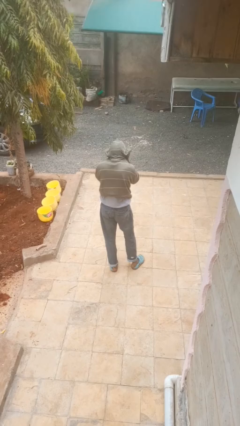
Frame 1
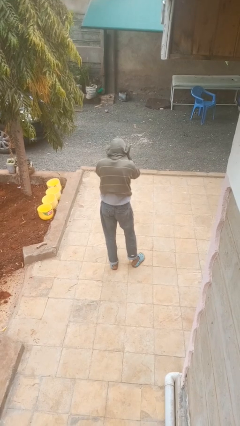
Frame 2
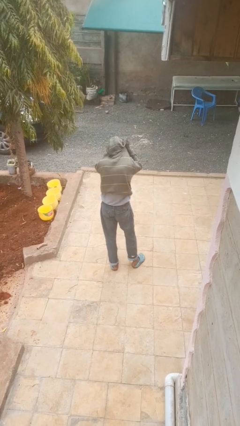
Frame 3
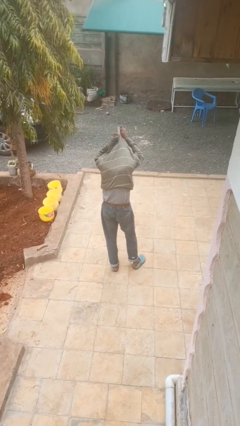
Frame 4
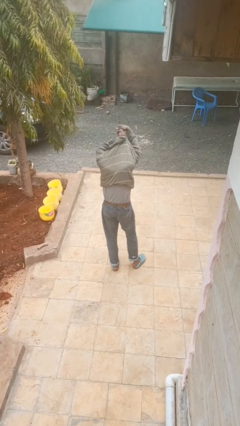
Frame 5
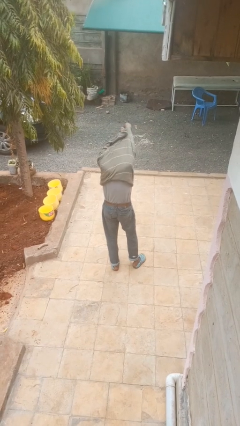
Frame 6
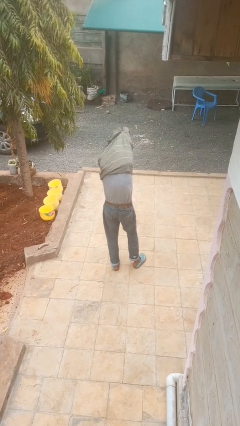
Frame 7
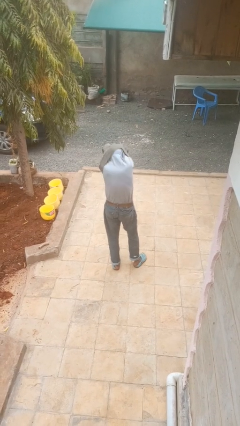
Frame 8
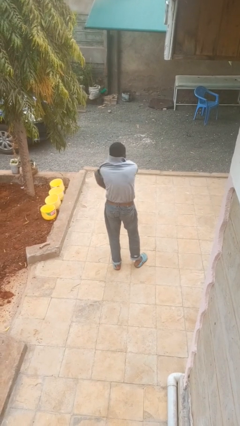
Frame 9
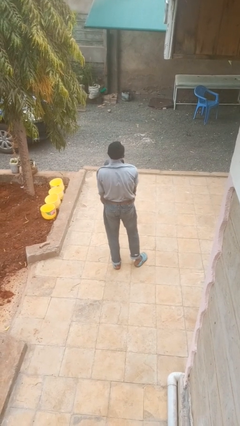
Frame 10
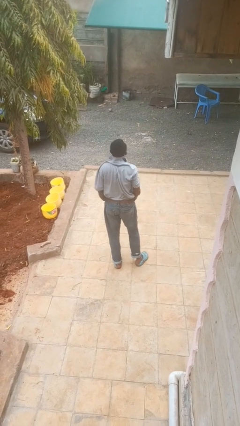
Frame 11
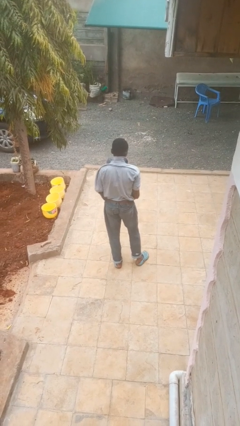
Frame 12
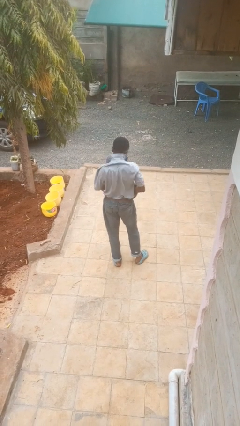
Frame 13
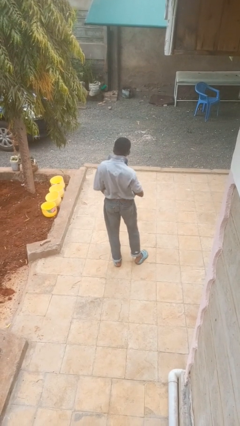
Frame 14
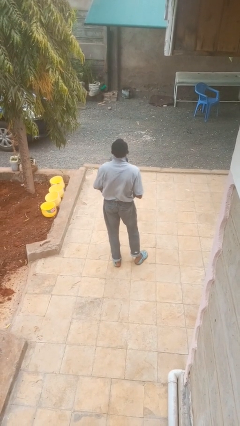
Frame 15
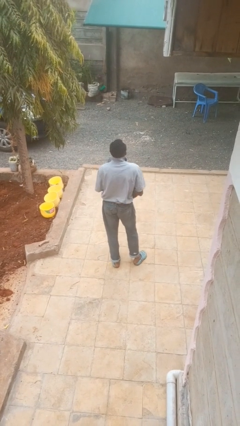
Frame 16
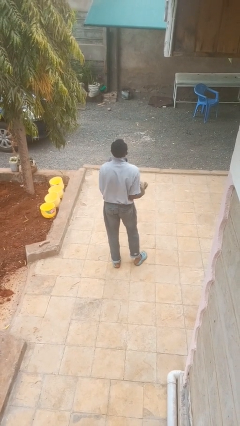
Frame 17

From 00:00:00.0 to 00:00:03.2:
person takes off hoodie

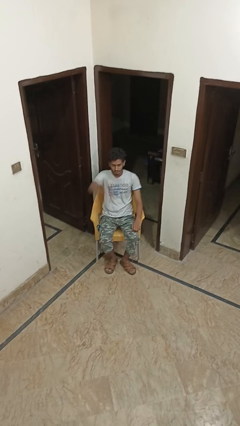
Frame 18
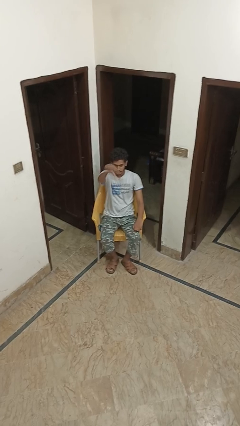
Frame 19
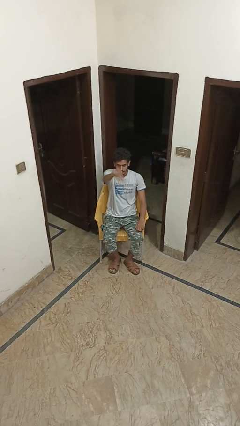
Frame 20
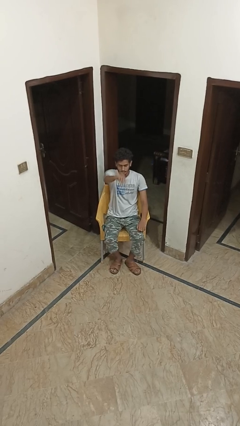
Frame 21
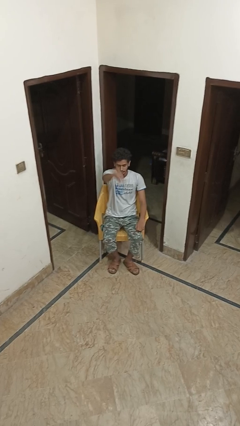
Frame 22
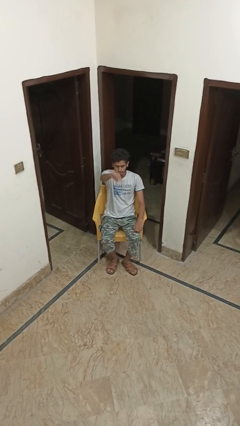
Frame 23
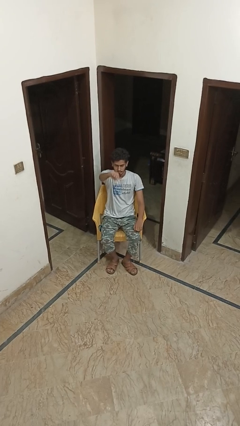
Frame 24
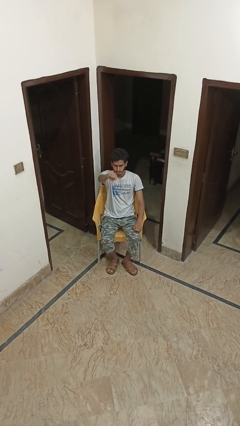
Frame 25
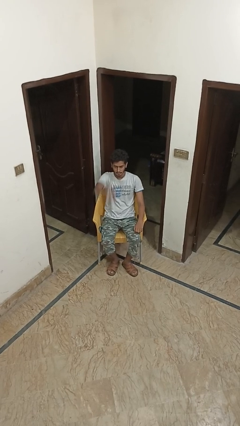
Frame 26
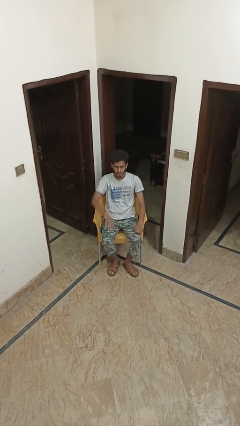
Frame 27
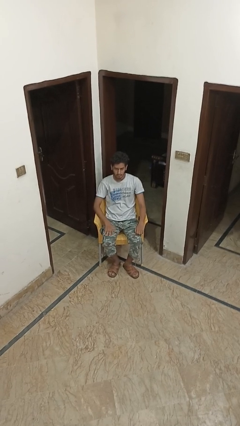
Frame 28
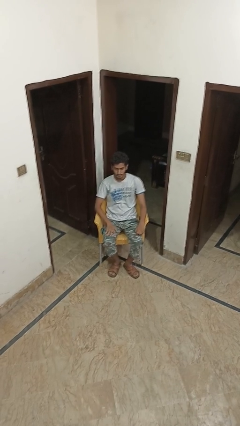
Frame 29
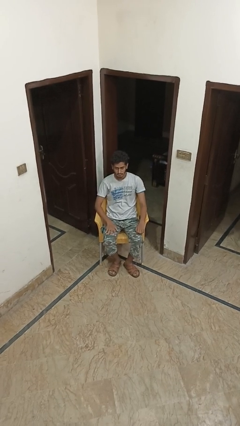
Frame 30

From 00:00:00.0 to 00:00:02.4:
person gestures thumbs down

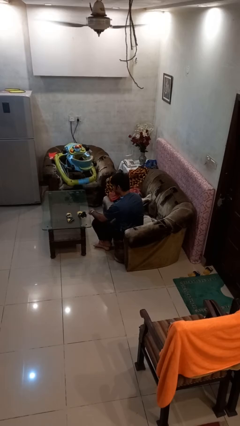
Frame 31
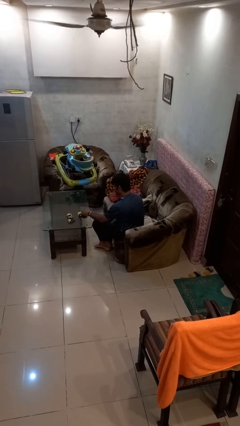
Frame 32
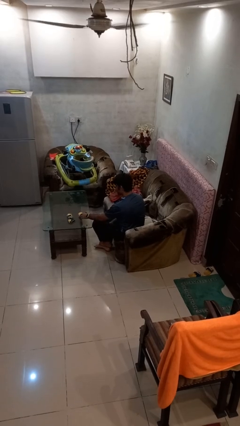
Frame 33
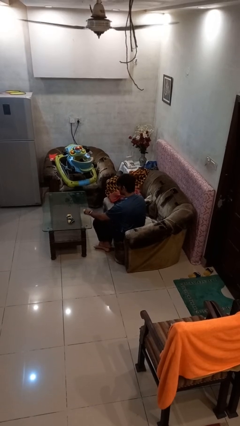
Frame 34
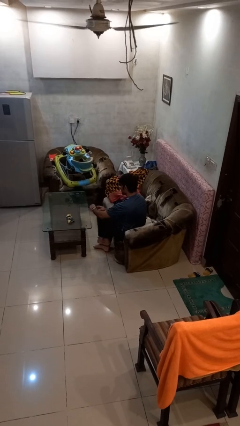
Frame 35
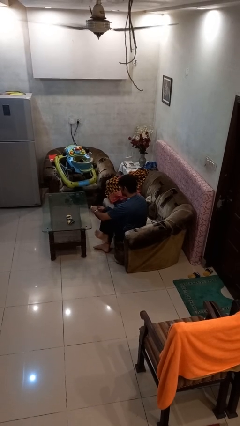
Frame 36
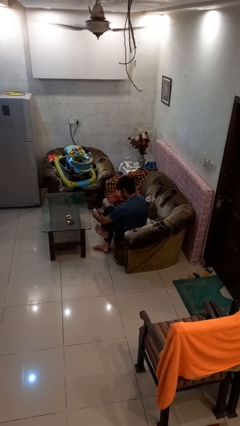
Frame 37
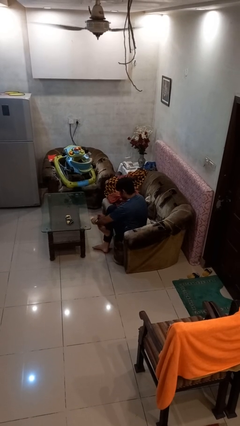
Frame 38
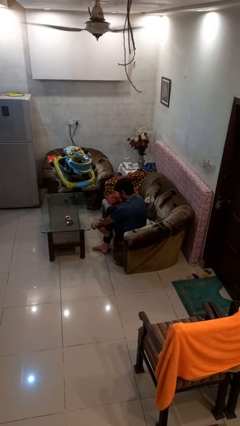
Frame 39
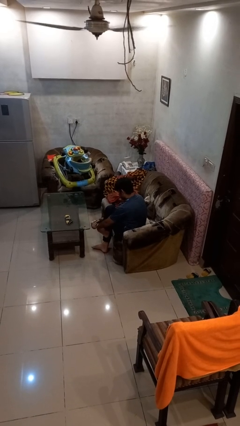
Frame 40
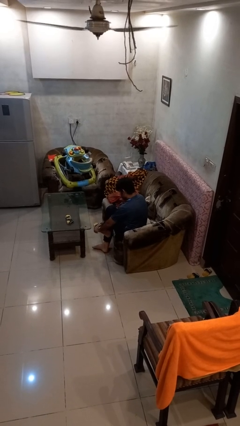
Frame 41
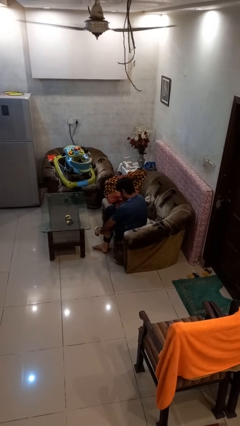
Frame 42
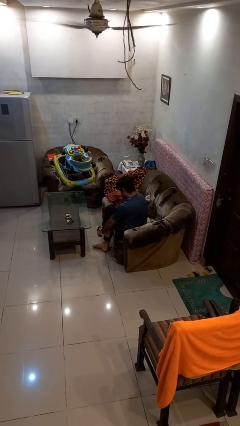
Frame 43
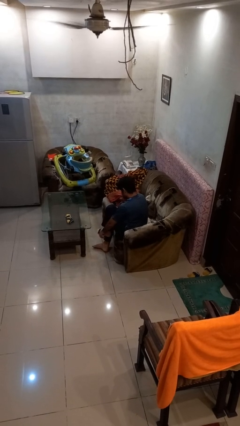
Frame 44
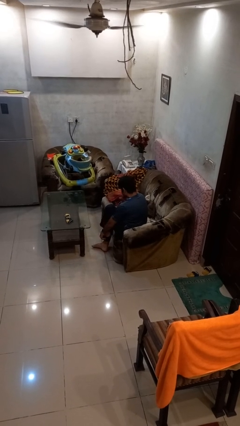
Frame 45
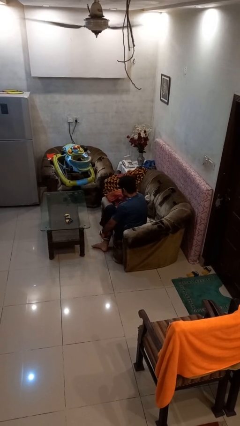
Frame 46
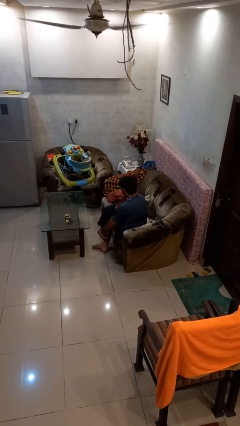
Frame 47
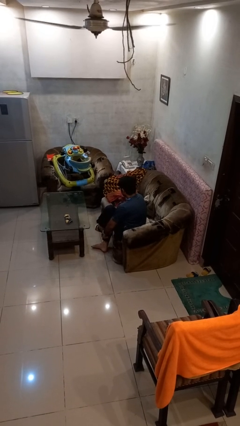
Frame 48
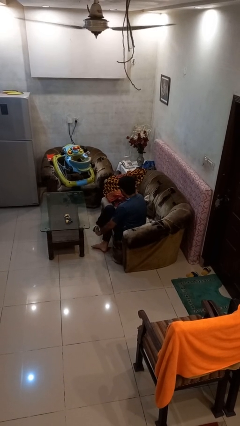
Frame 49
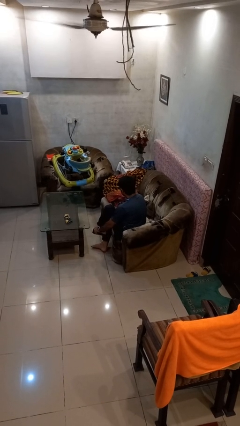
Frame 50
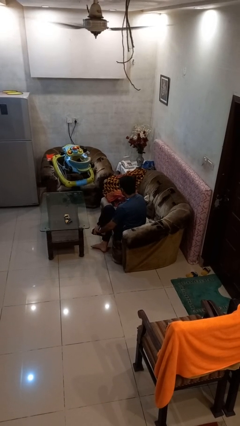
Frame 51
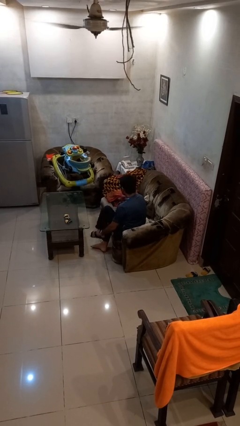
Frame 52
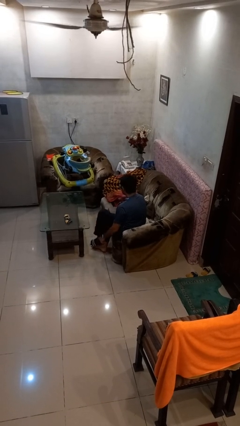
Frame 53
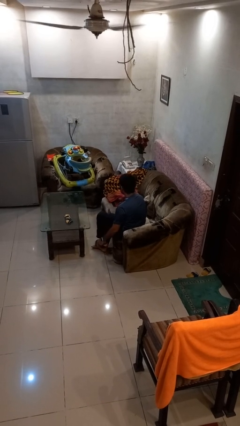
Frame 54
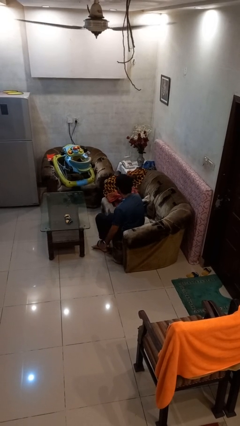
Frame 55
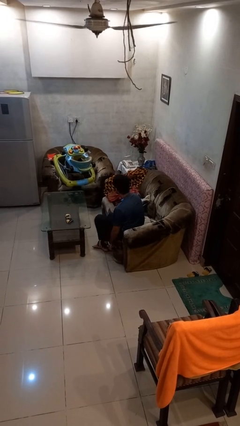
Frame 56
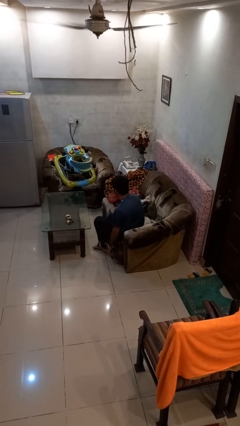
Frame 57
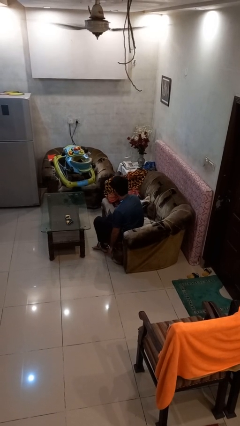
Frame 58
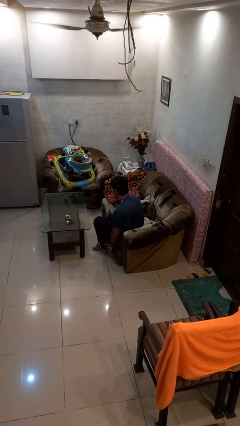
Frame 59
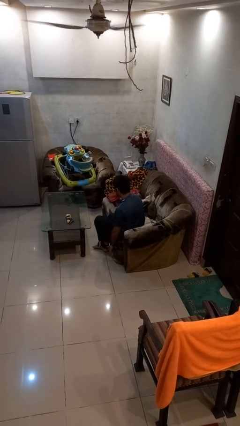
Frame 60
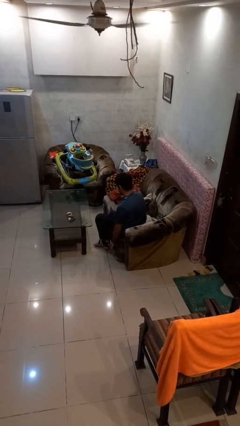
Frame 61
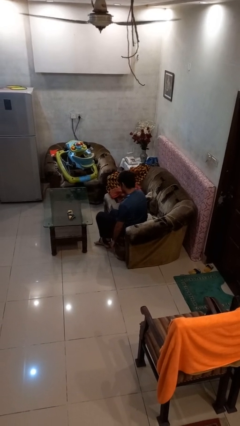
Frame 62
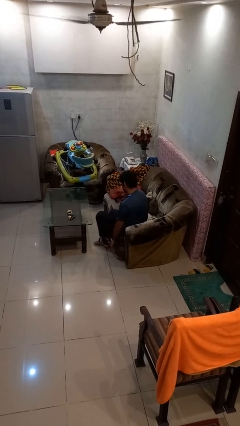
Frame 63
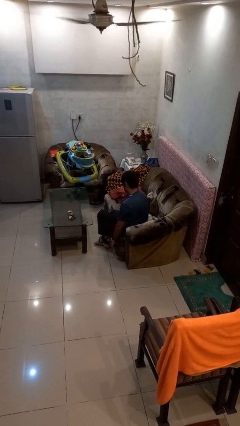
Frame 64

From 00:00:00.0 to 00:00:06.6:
person puts on socks

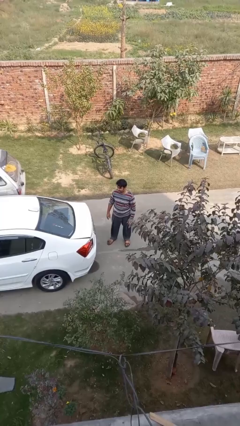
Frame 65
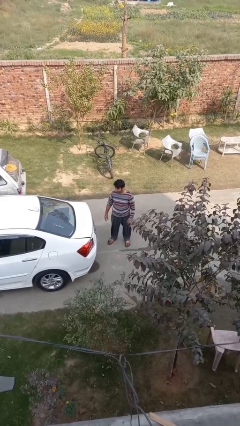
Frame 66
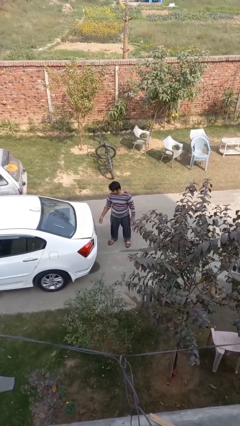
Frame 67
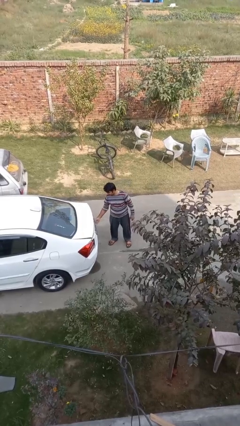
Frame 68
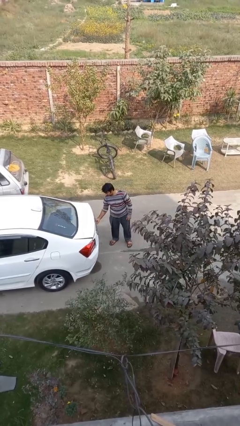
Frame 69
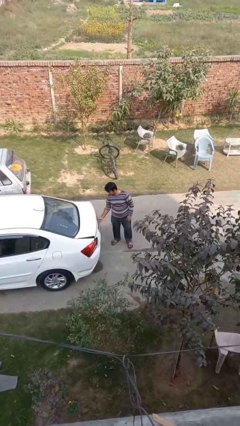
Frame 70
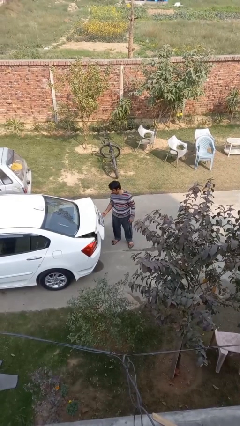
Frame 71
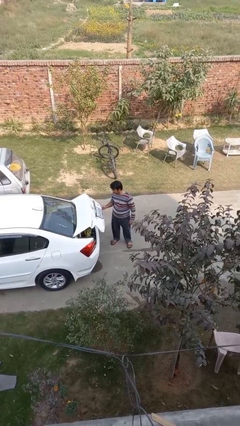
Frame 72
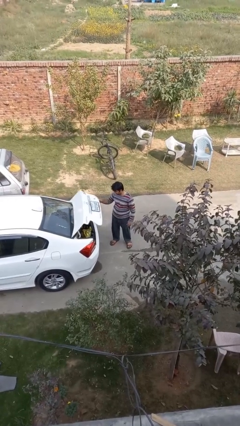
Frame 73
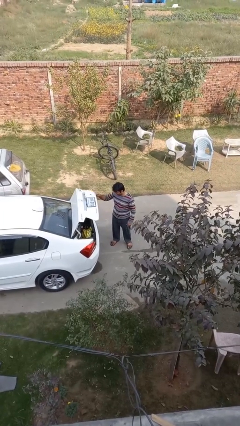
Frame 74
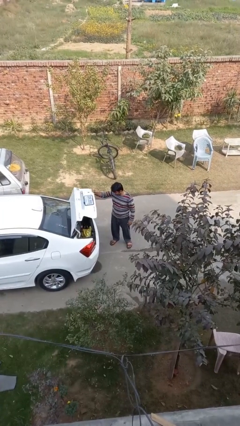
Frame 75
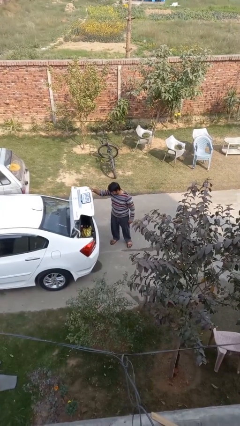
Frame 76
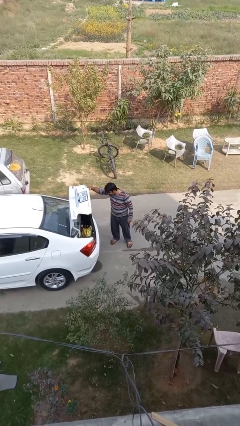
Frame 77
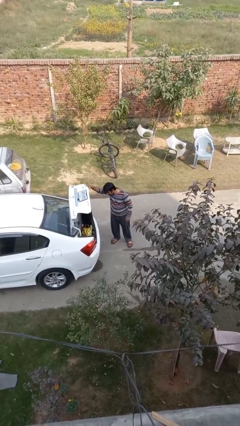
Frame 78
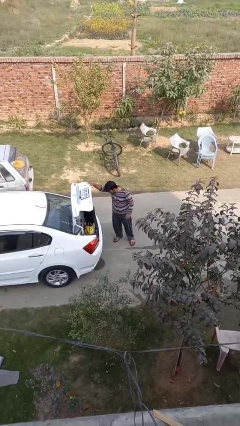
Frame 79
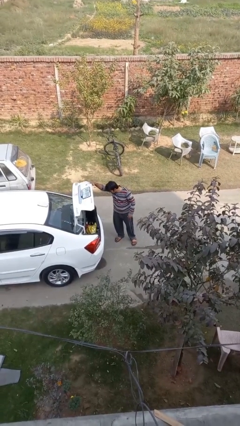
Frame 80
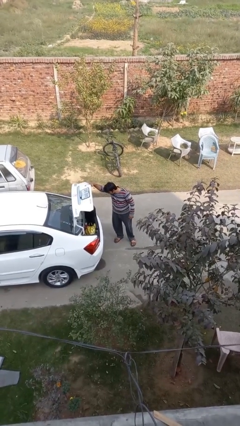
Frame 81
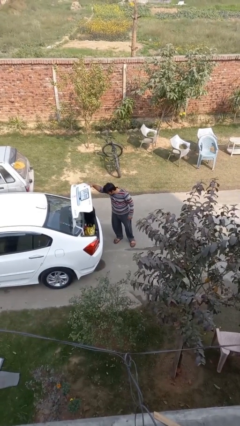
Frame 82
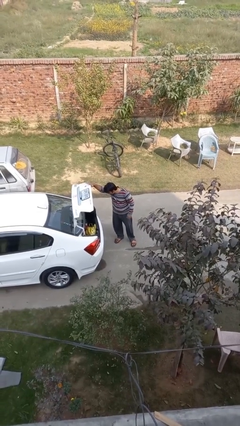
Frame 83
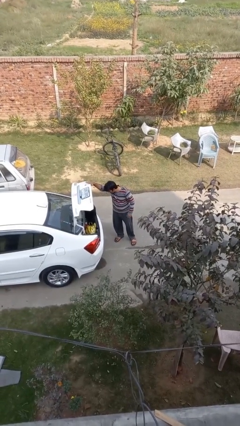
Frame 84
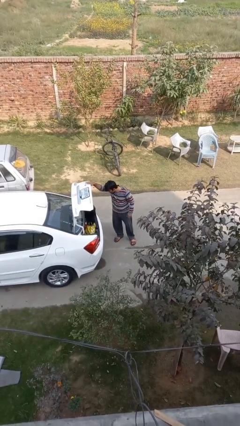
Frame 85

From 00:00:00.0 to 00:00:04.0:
person opens car trunk

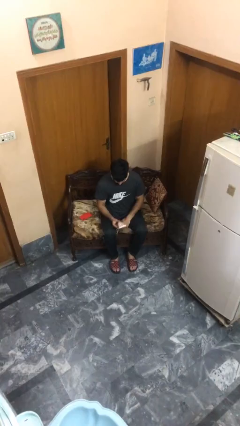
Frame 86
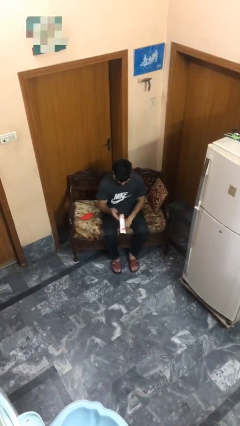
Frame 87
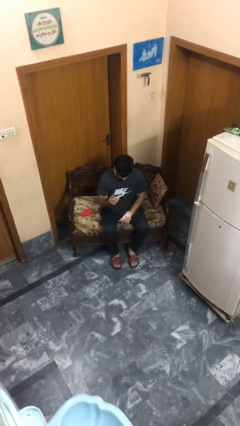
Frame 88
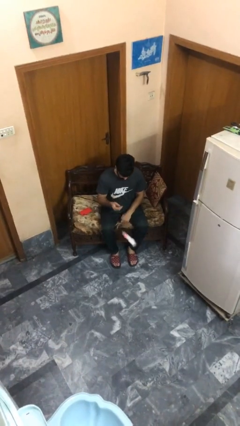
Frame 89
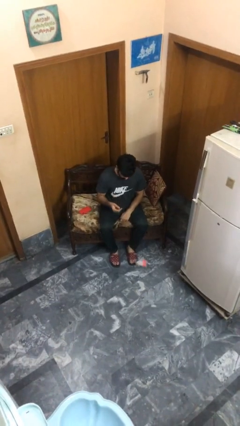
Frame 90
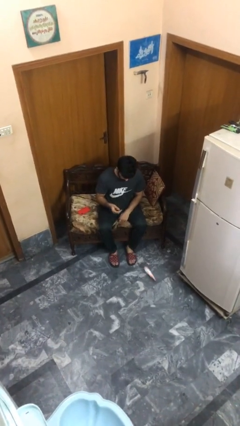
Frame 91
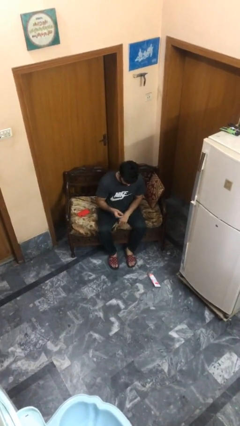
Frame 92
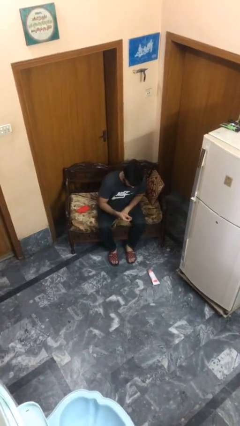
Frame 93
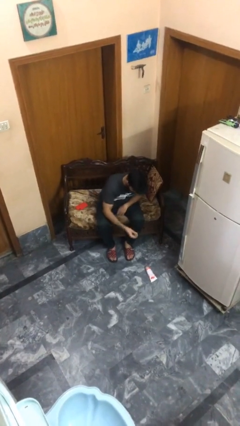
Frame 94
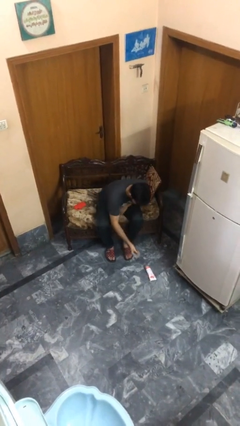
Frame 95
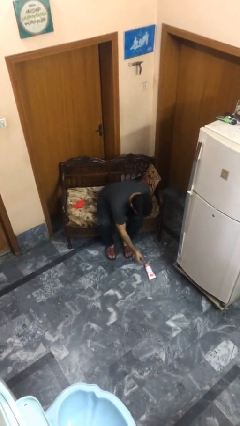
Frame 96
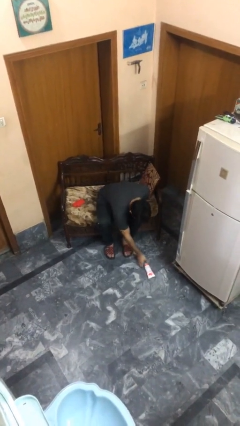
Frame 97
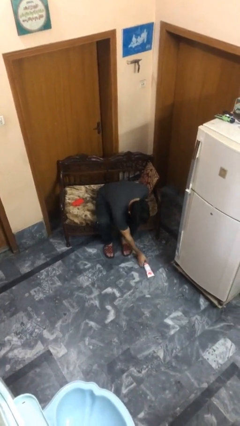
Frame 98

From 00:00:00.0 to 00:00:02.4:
person drops object
